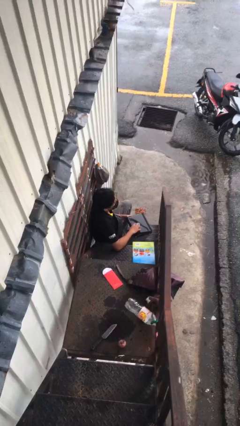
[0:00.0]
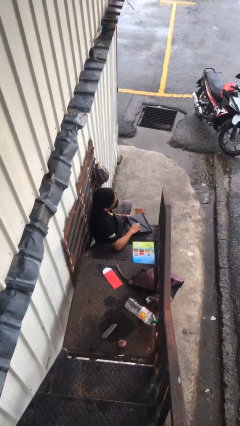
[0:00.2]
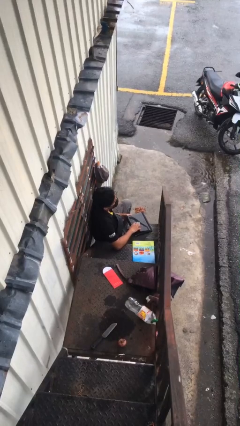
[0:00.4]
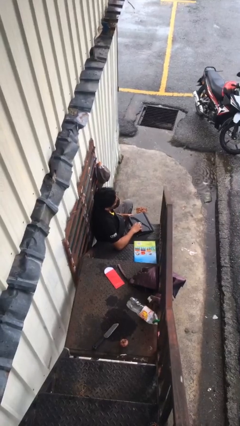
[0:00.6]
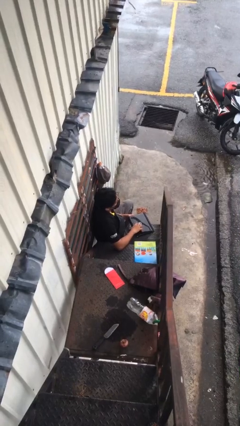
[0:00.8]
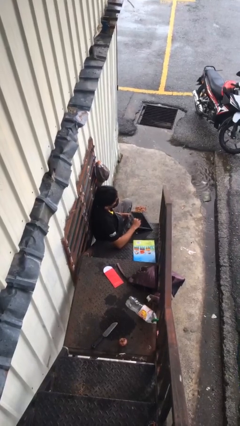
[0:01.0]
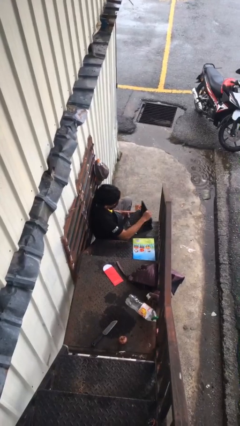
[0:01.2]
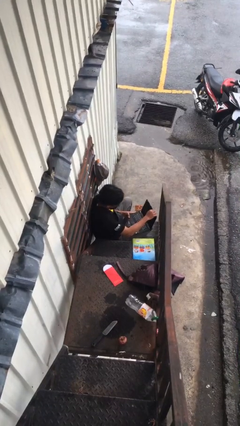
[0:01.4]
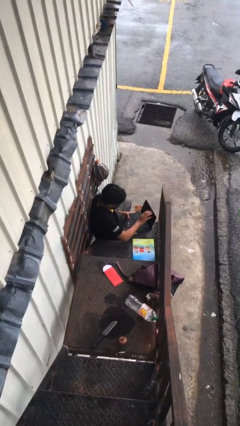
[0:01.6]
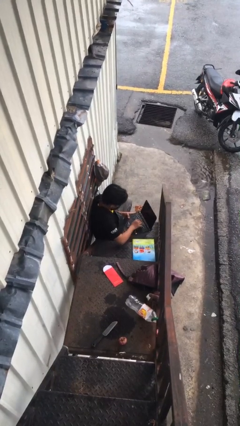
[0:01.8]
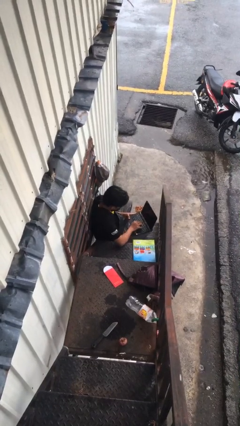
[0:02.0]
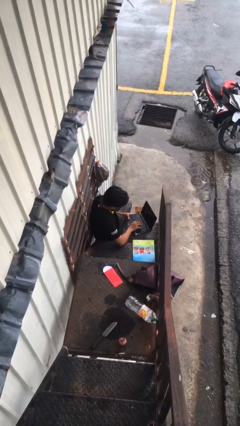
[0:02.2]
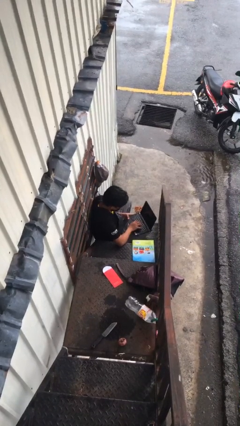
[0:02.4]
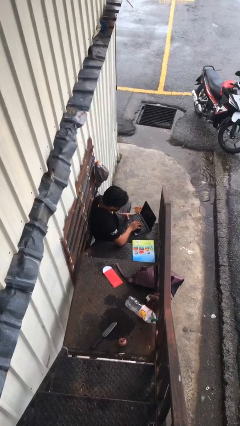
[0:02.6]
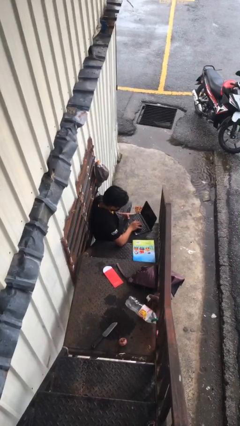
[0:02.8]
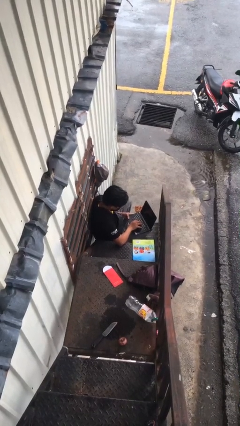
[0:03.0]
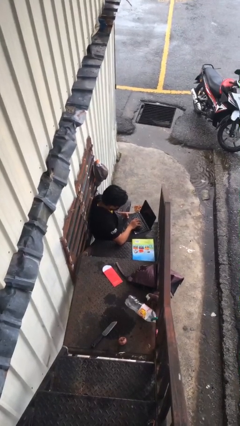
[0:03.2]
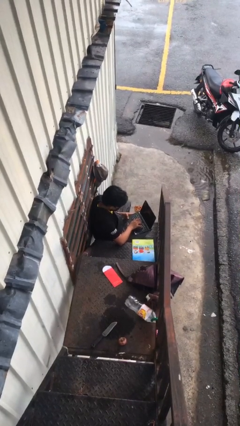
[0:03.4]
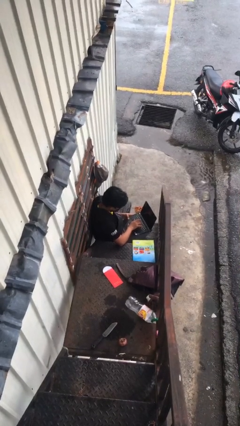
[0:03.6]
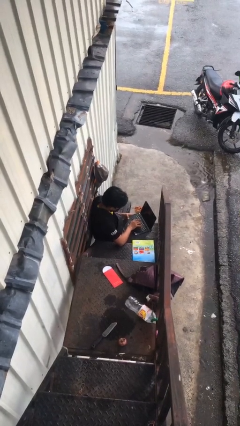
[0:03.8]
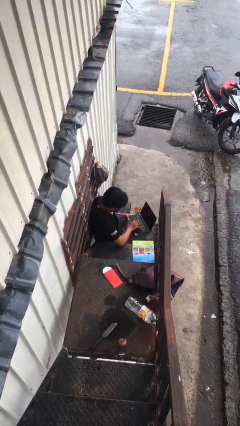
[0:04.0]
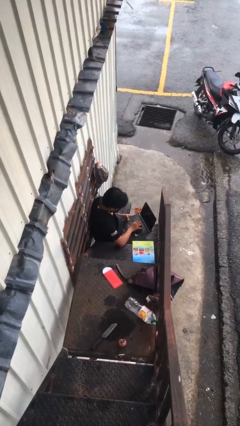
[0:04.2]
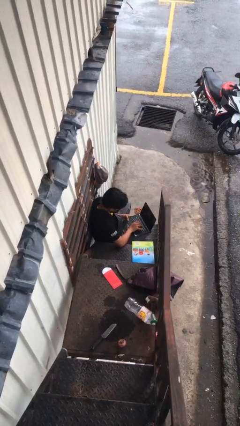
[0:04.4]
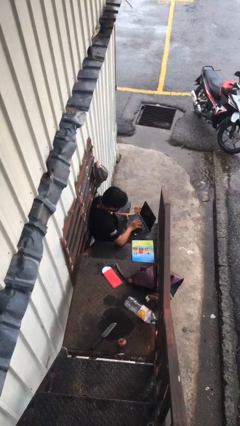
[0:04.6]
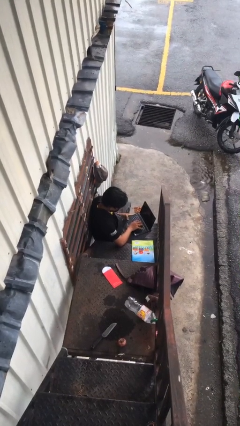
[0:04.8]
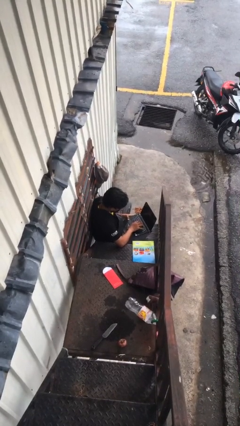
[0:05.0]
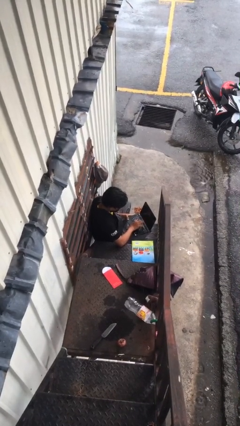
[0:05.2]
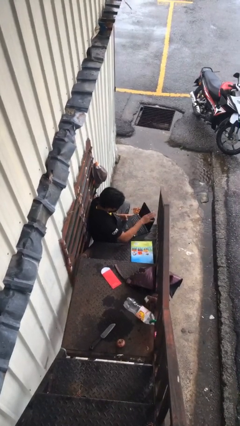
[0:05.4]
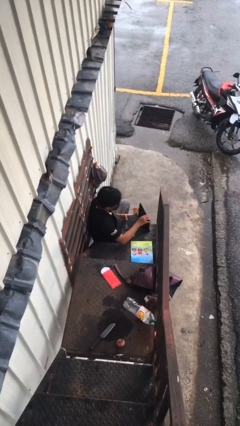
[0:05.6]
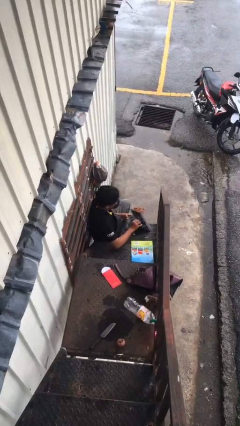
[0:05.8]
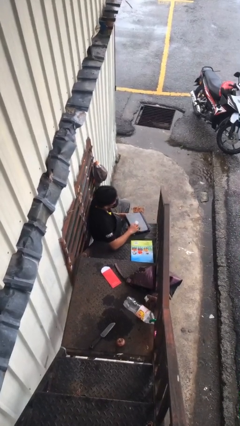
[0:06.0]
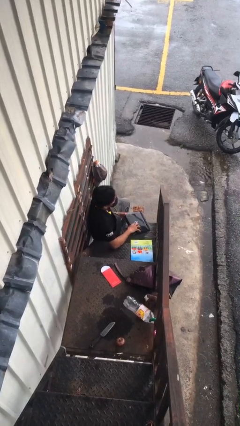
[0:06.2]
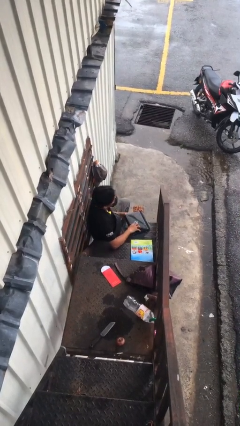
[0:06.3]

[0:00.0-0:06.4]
person interacts with laptop

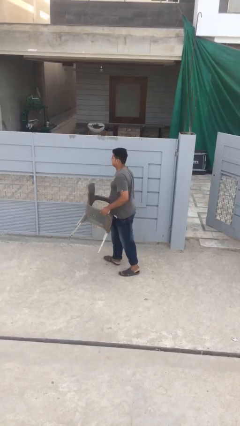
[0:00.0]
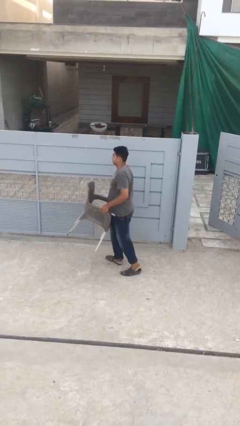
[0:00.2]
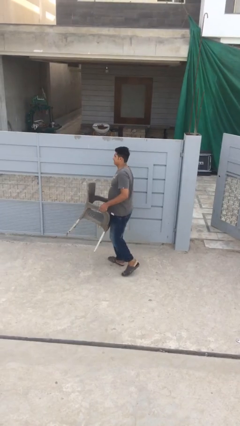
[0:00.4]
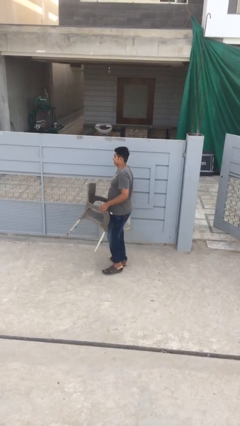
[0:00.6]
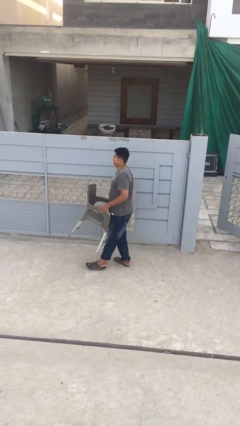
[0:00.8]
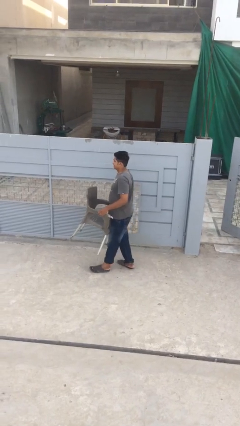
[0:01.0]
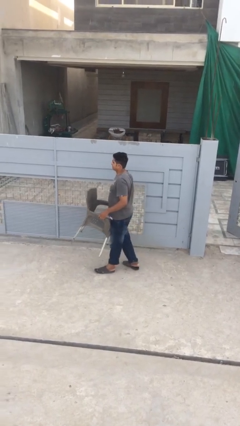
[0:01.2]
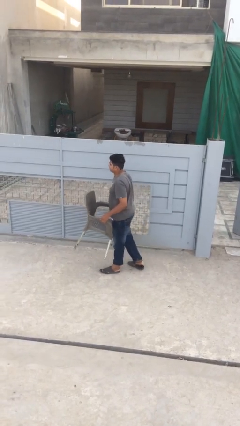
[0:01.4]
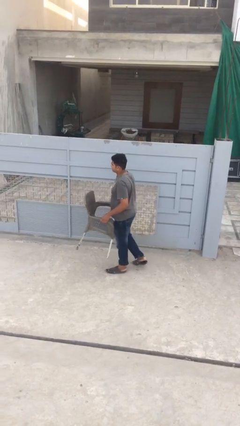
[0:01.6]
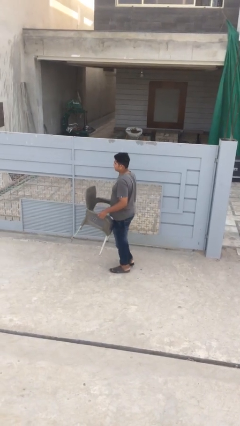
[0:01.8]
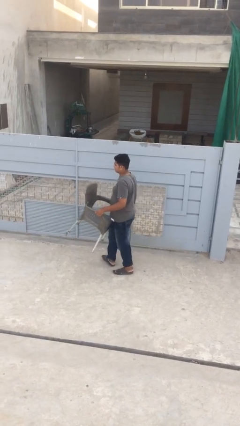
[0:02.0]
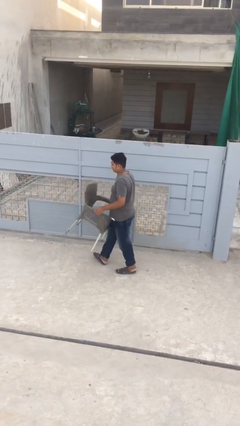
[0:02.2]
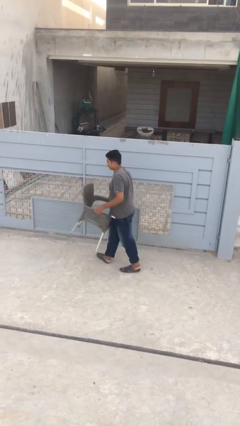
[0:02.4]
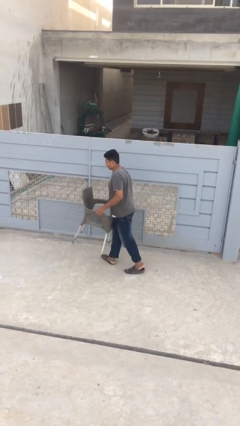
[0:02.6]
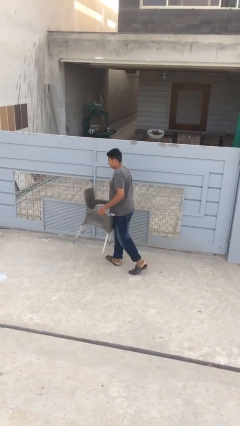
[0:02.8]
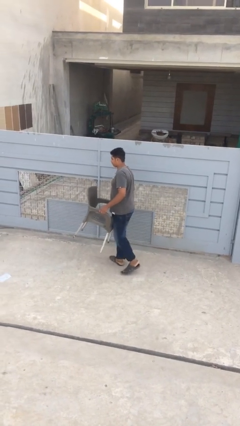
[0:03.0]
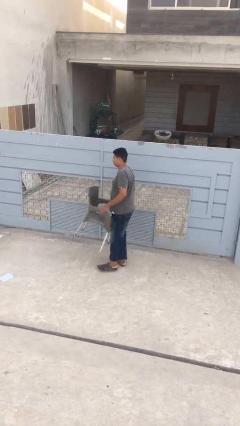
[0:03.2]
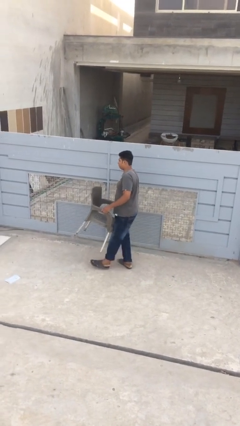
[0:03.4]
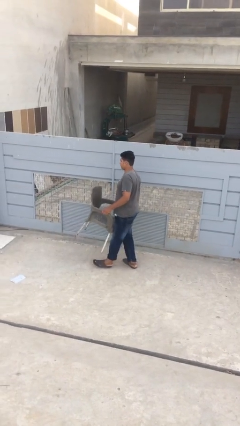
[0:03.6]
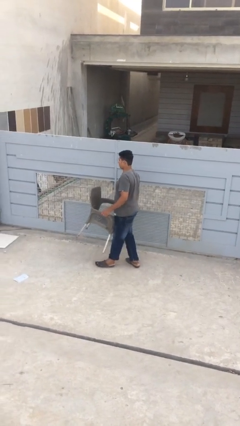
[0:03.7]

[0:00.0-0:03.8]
person carries heavy object

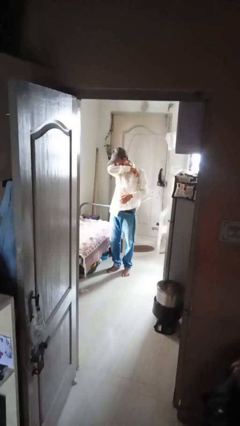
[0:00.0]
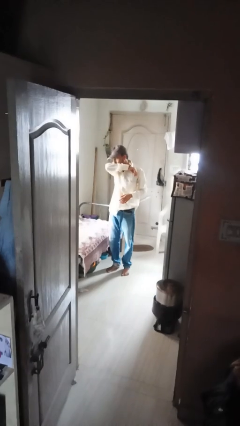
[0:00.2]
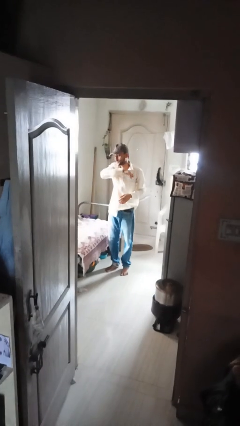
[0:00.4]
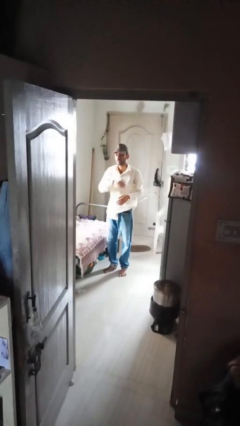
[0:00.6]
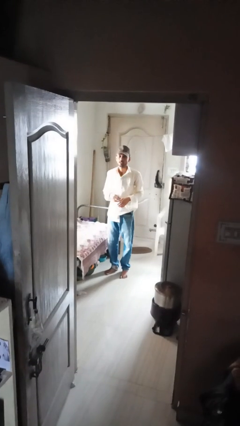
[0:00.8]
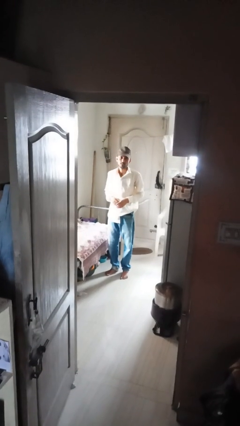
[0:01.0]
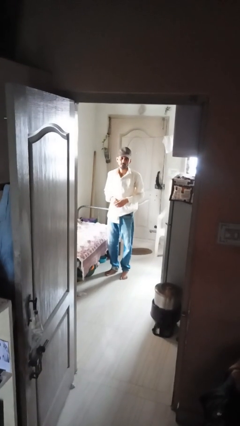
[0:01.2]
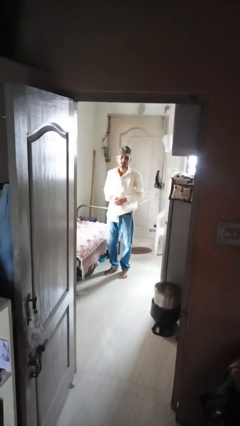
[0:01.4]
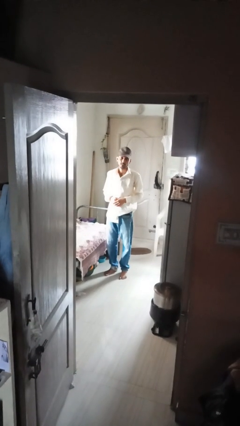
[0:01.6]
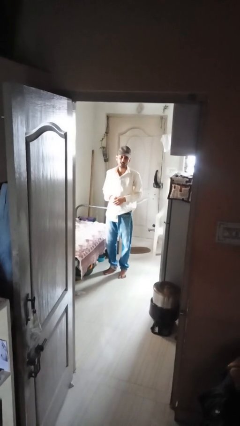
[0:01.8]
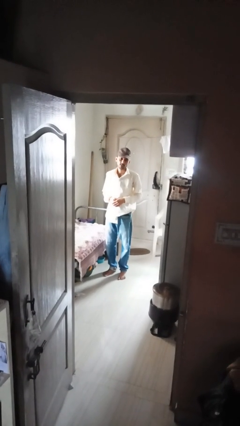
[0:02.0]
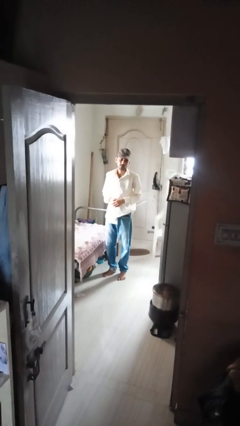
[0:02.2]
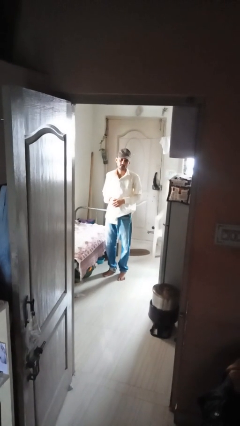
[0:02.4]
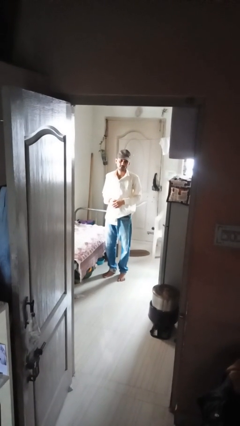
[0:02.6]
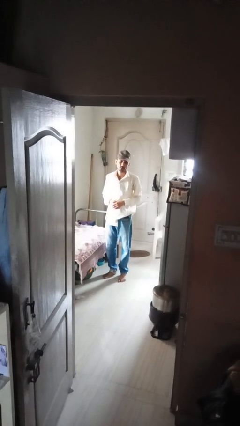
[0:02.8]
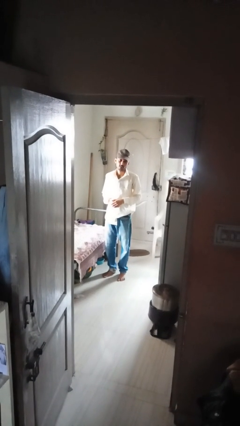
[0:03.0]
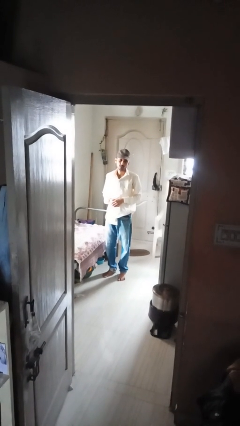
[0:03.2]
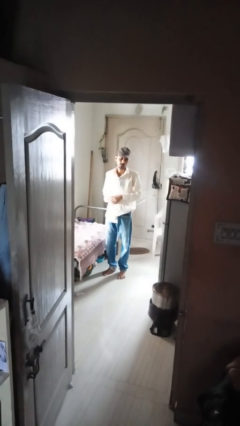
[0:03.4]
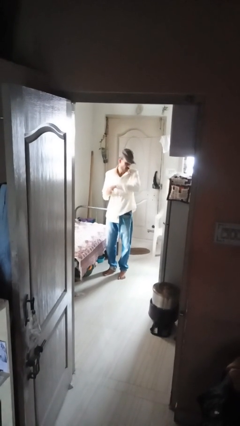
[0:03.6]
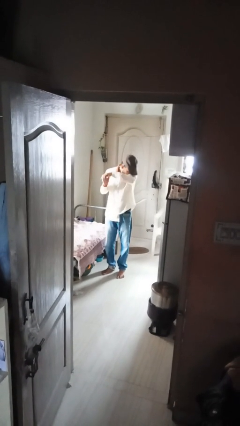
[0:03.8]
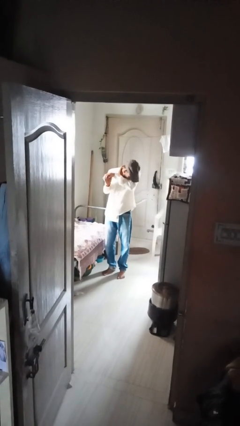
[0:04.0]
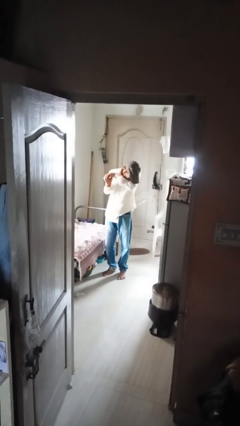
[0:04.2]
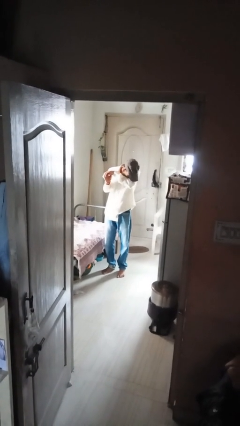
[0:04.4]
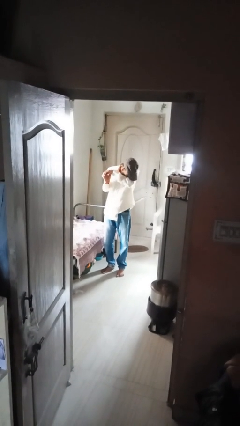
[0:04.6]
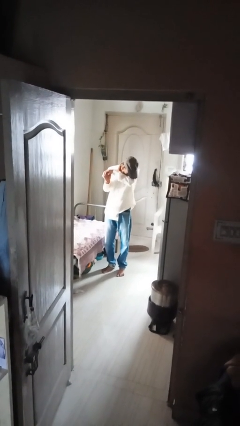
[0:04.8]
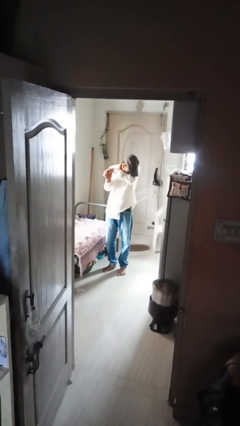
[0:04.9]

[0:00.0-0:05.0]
person sneezes into arm

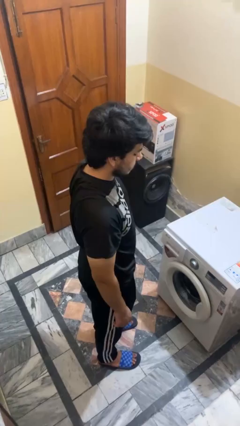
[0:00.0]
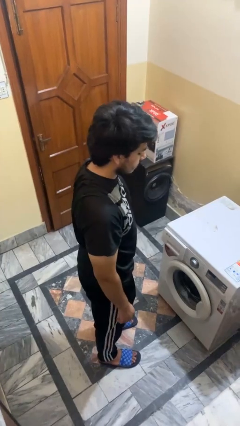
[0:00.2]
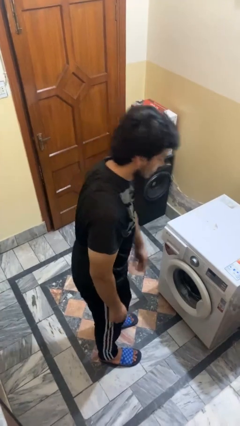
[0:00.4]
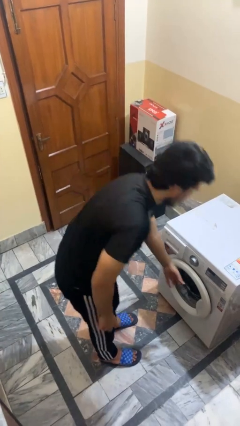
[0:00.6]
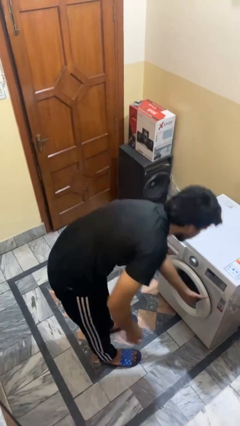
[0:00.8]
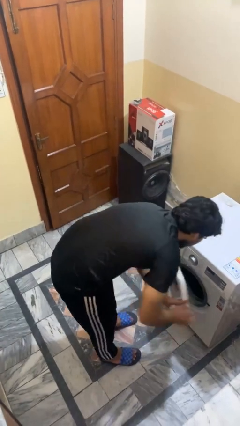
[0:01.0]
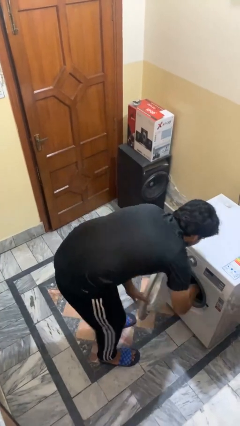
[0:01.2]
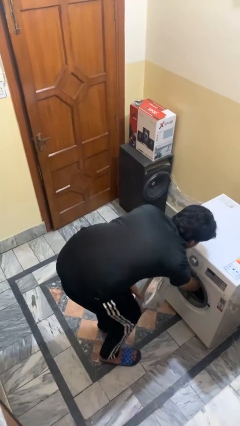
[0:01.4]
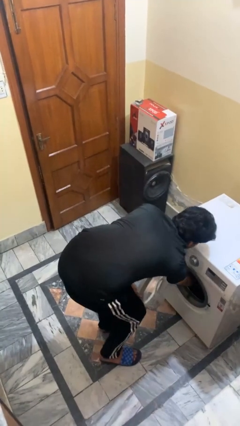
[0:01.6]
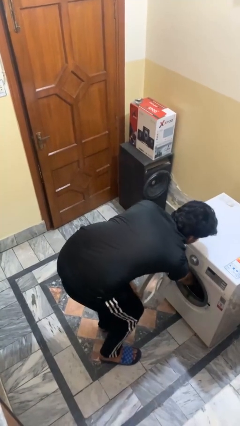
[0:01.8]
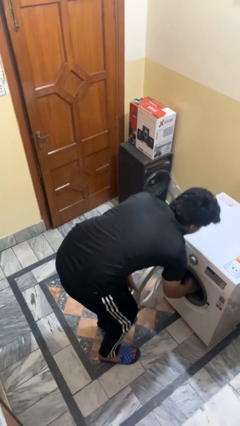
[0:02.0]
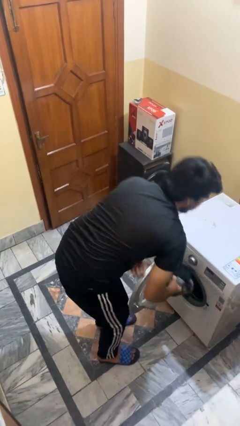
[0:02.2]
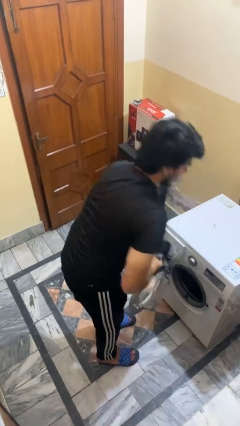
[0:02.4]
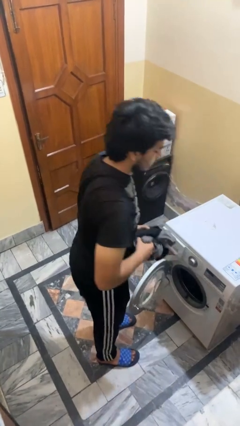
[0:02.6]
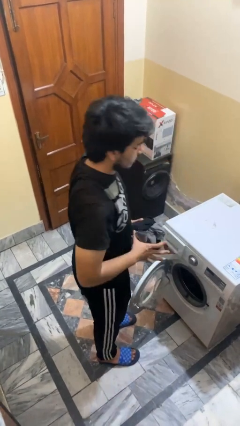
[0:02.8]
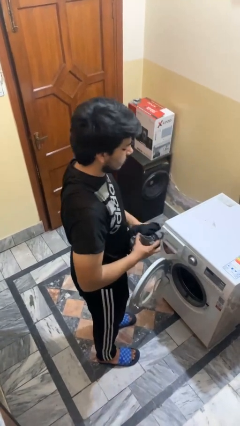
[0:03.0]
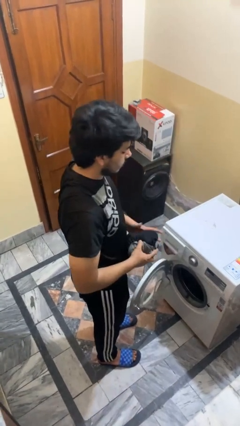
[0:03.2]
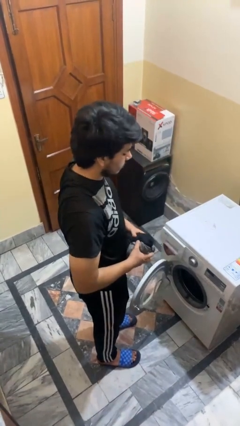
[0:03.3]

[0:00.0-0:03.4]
person unloads clotheswasher
